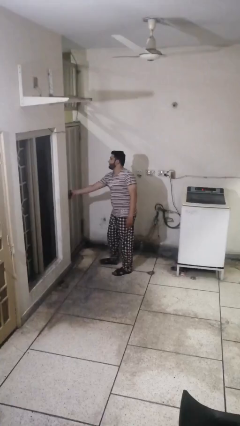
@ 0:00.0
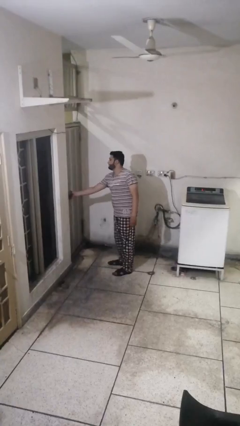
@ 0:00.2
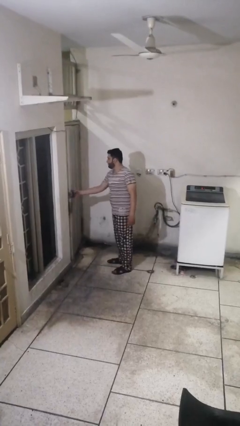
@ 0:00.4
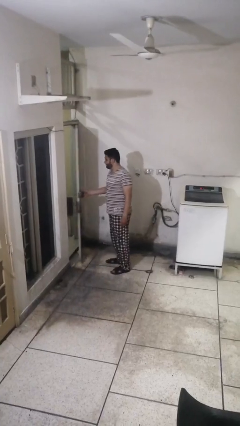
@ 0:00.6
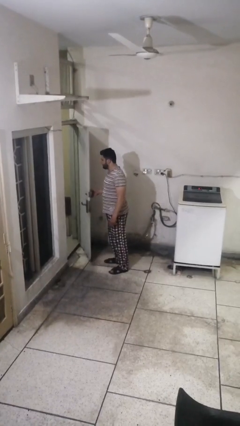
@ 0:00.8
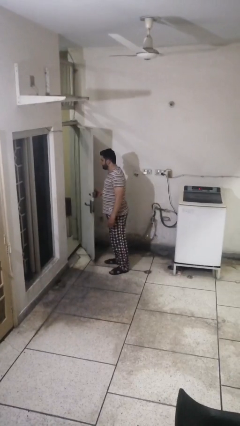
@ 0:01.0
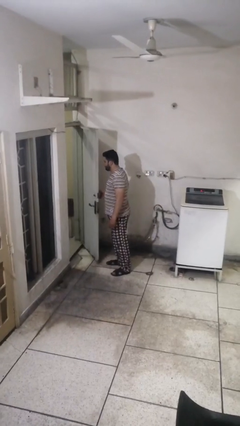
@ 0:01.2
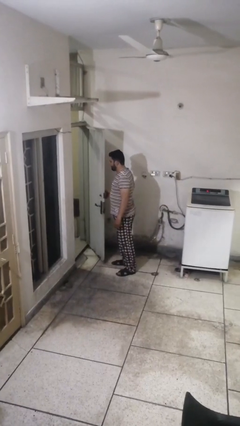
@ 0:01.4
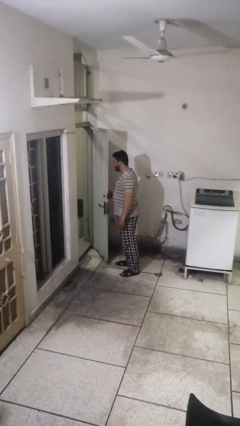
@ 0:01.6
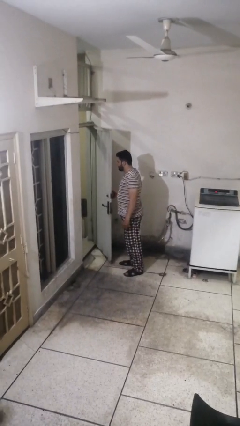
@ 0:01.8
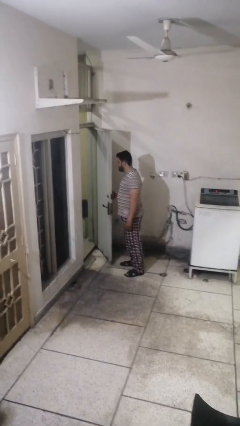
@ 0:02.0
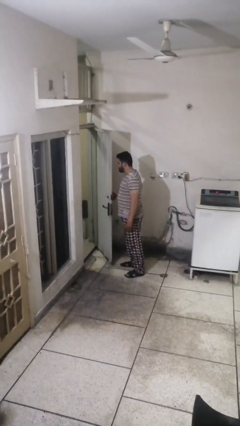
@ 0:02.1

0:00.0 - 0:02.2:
person opens facility door

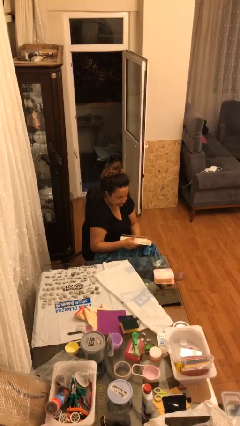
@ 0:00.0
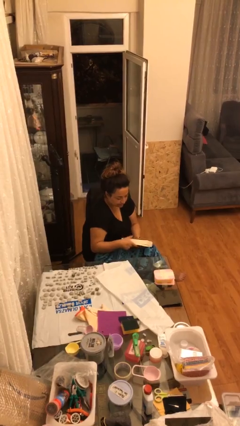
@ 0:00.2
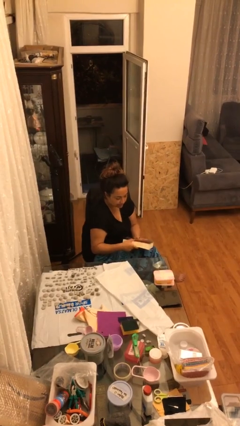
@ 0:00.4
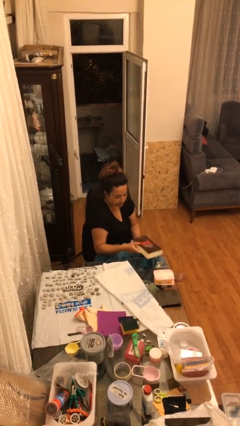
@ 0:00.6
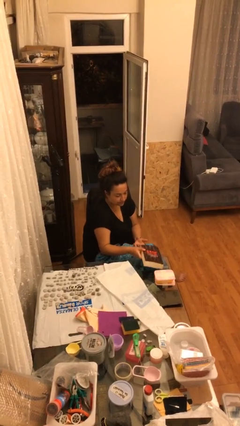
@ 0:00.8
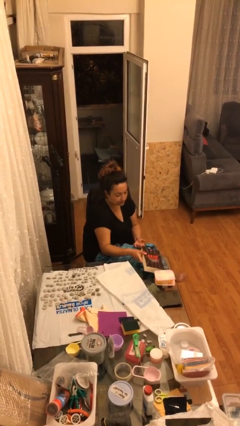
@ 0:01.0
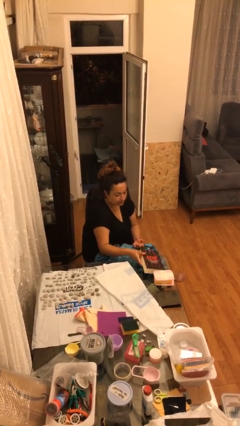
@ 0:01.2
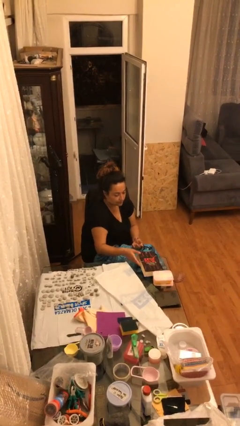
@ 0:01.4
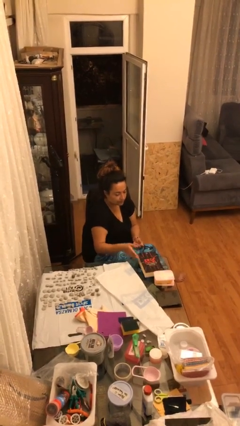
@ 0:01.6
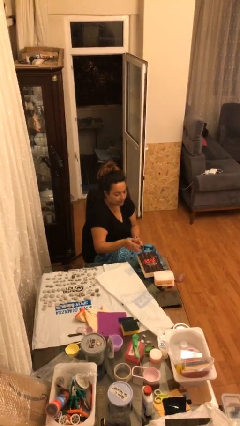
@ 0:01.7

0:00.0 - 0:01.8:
person puts down object on table

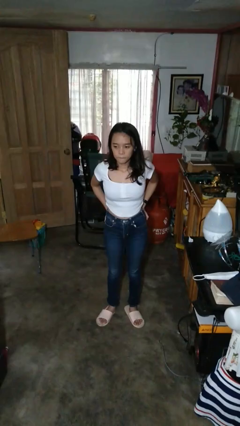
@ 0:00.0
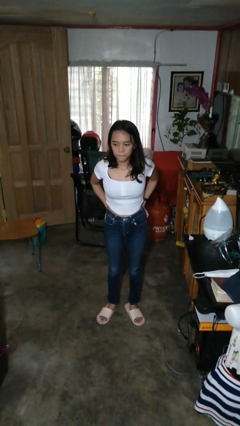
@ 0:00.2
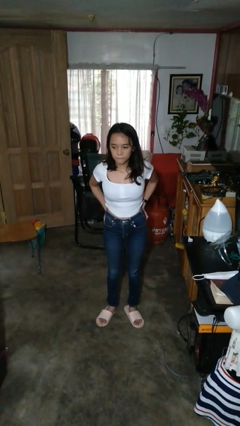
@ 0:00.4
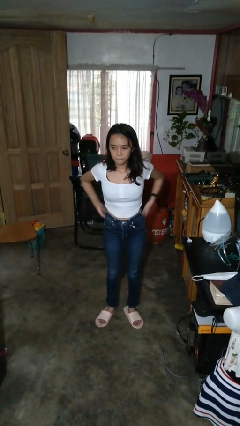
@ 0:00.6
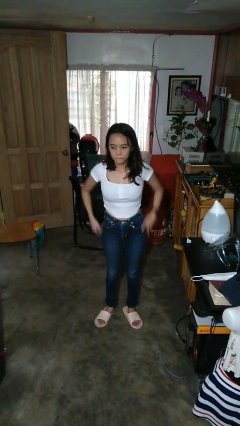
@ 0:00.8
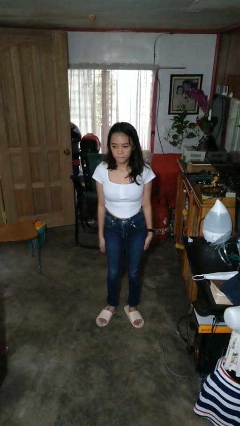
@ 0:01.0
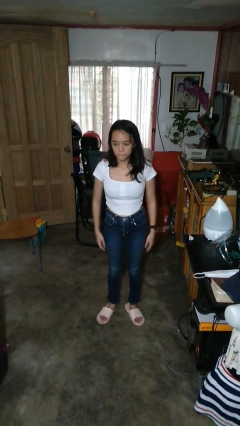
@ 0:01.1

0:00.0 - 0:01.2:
person puts hands in back pockets

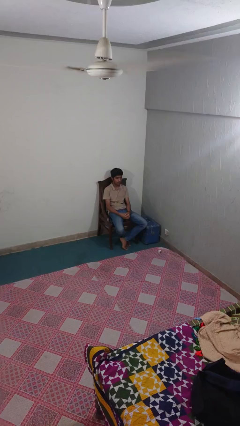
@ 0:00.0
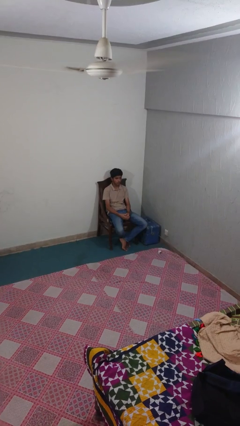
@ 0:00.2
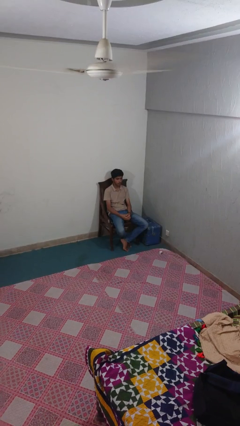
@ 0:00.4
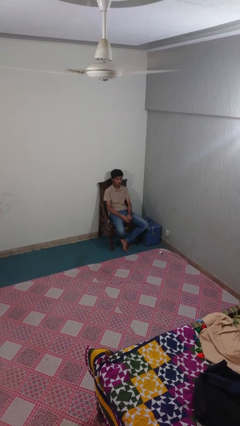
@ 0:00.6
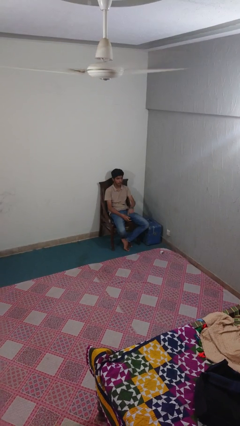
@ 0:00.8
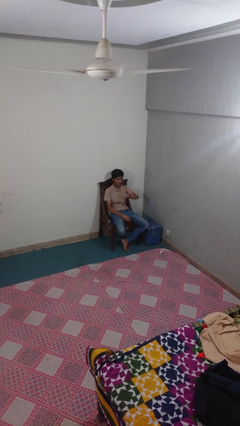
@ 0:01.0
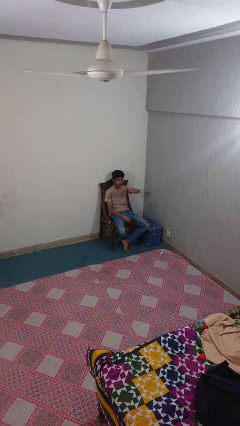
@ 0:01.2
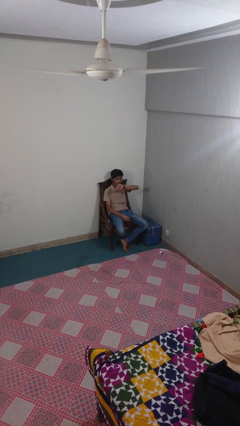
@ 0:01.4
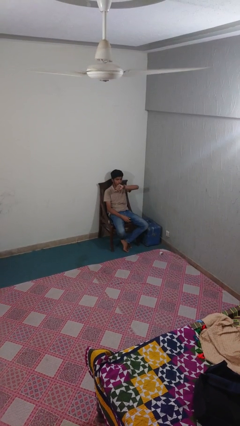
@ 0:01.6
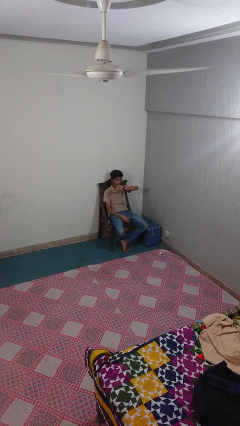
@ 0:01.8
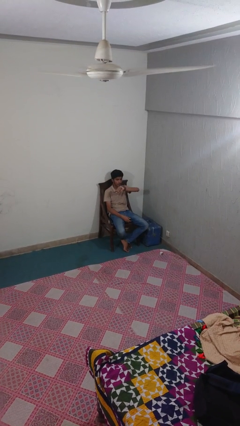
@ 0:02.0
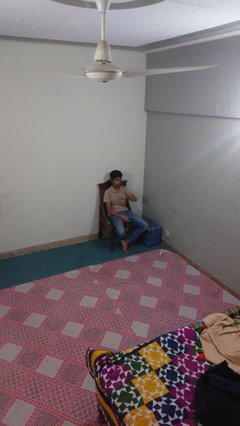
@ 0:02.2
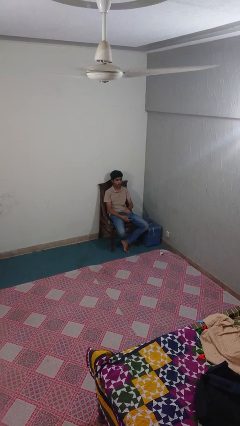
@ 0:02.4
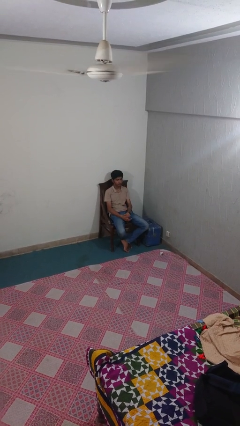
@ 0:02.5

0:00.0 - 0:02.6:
person looks at wristwatch

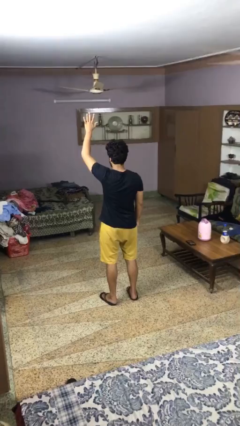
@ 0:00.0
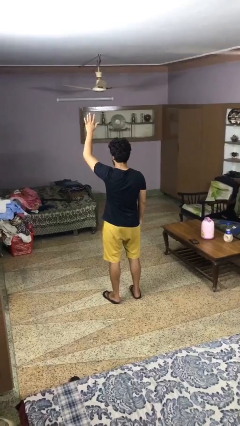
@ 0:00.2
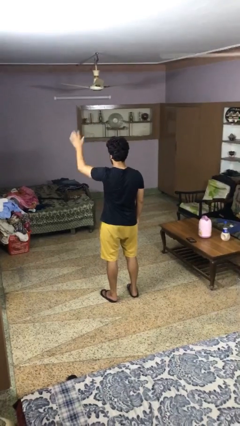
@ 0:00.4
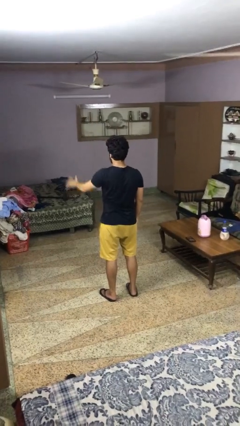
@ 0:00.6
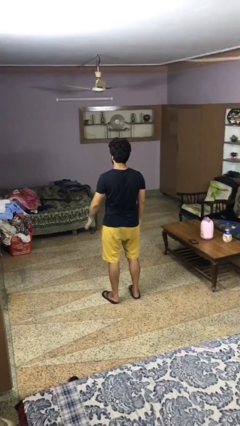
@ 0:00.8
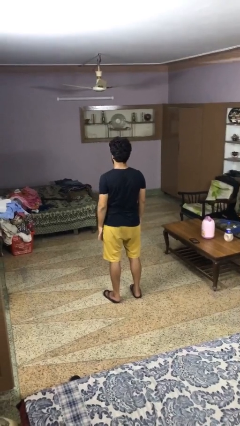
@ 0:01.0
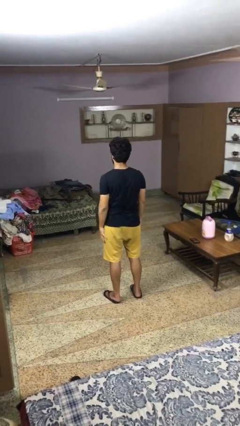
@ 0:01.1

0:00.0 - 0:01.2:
person gestures lower hand

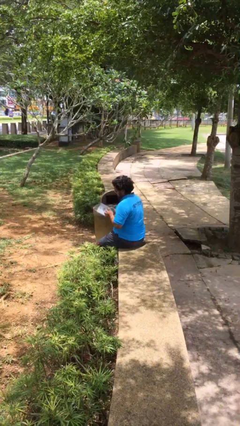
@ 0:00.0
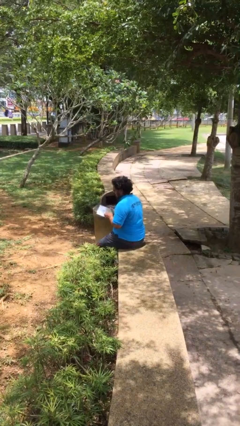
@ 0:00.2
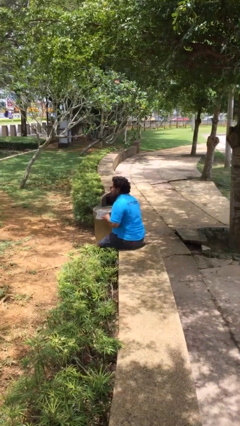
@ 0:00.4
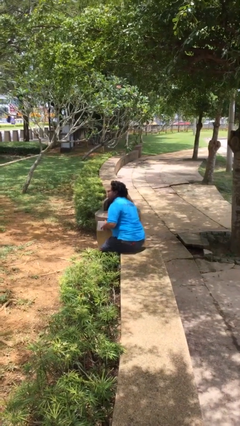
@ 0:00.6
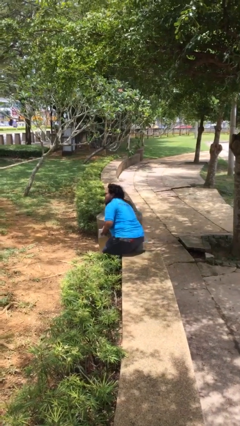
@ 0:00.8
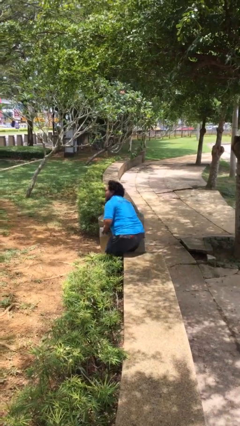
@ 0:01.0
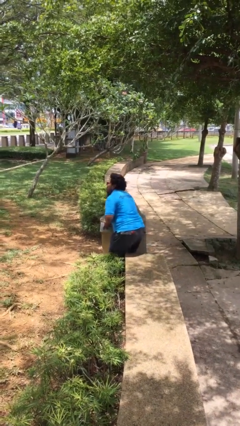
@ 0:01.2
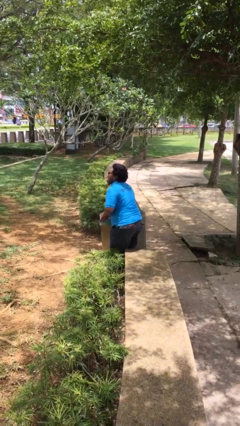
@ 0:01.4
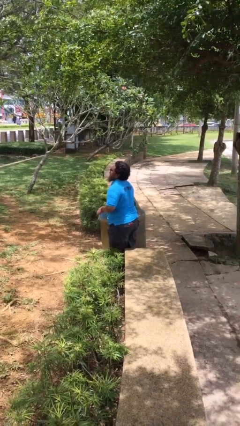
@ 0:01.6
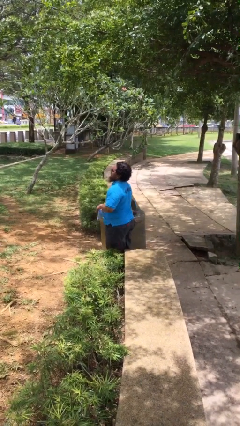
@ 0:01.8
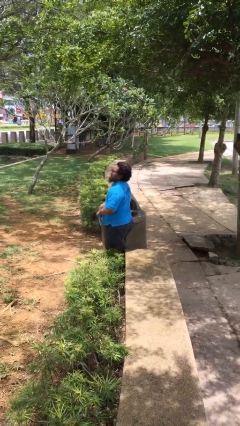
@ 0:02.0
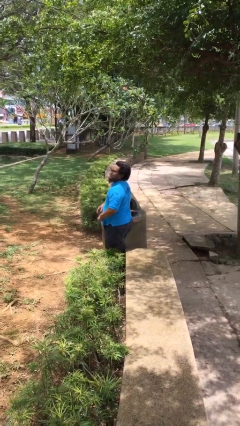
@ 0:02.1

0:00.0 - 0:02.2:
person stands up

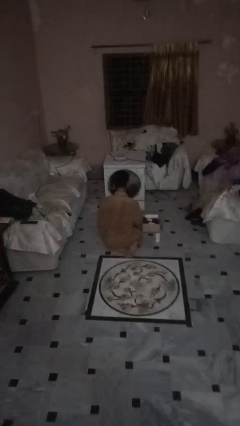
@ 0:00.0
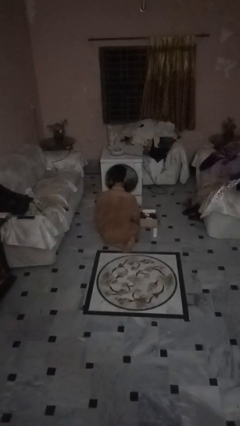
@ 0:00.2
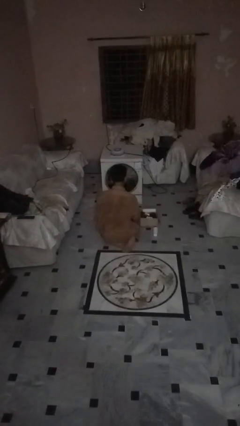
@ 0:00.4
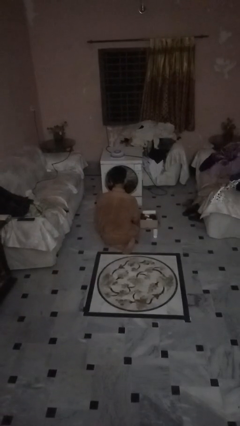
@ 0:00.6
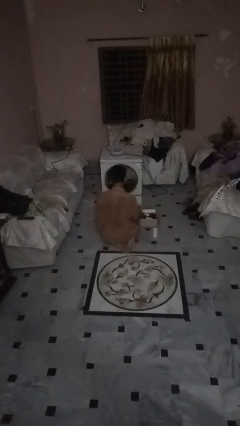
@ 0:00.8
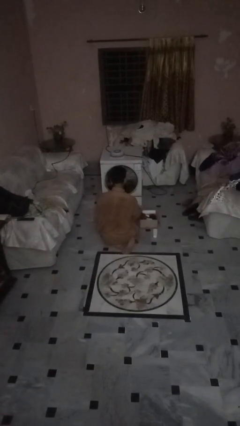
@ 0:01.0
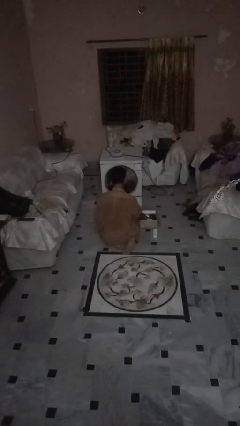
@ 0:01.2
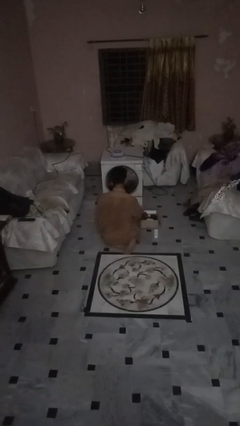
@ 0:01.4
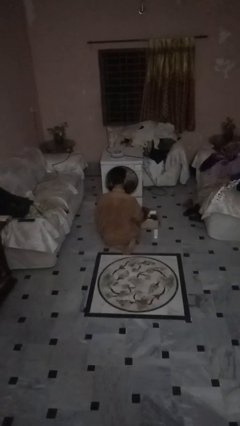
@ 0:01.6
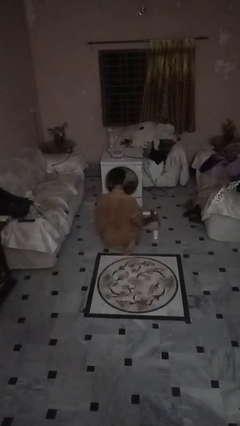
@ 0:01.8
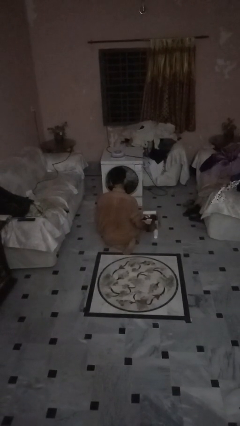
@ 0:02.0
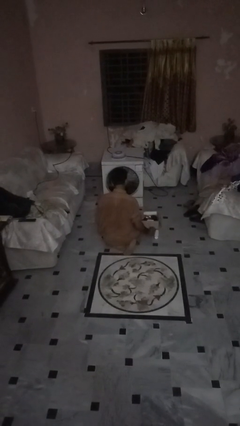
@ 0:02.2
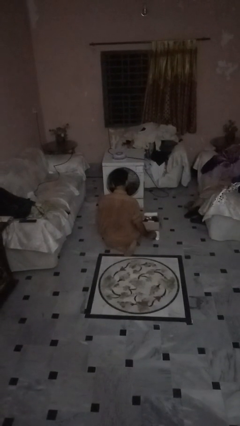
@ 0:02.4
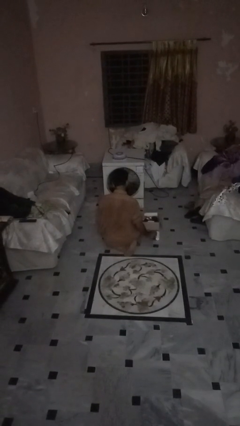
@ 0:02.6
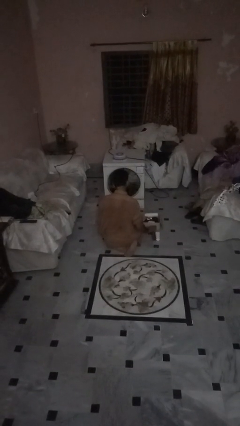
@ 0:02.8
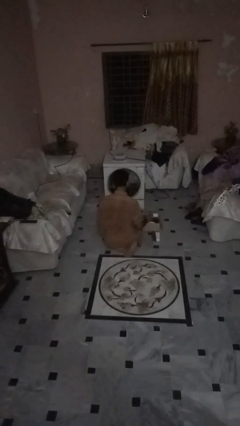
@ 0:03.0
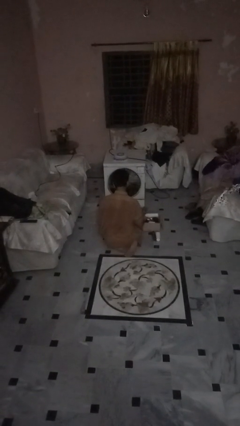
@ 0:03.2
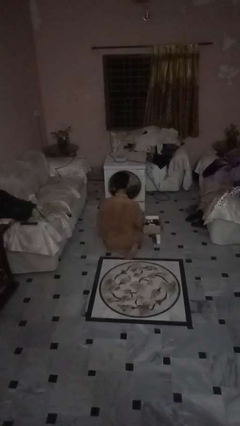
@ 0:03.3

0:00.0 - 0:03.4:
person unloads box onto floor

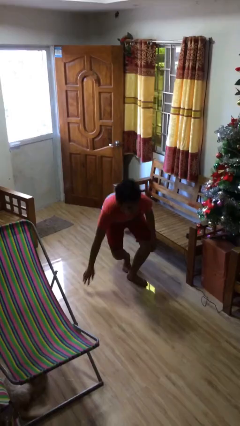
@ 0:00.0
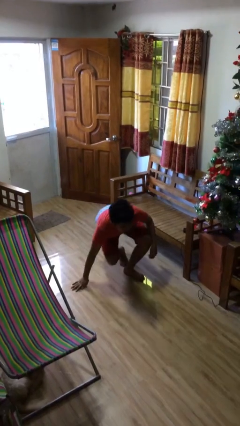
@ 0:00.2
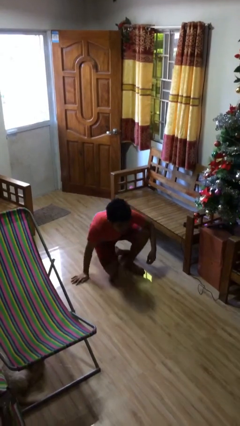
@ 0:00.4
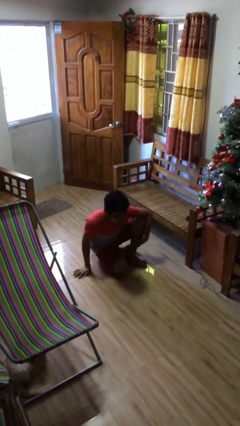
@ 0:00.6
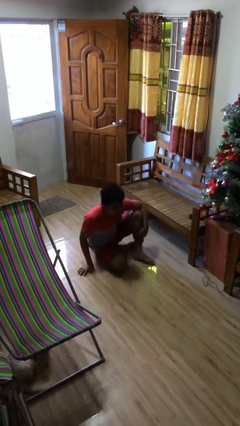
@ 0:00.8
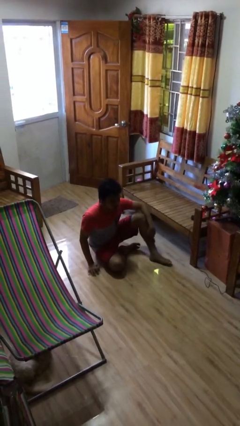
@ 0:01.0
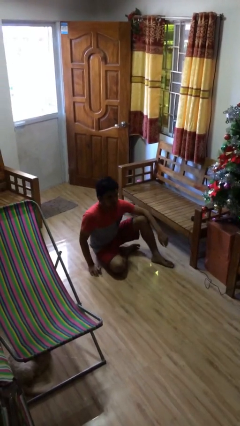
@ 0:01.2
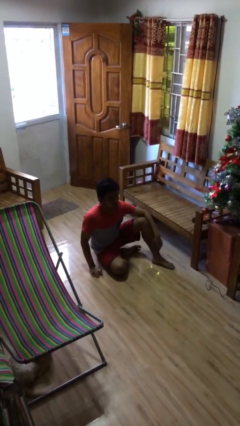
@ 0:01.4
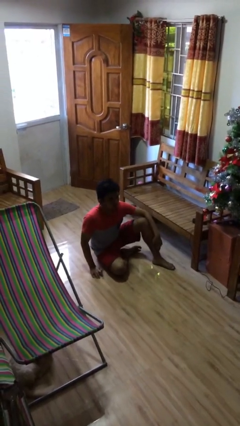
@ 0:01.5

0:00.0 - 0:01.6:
person sits down

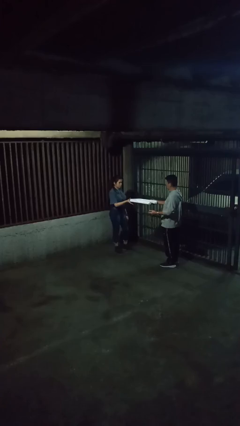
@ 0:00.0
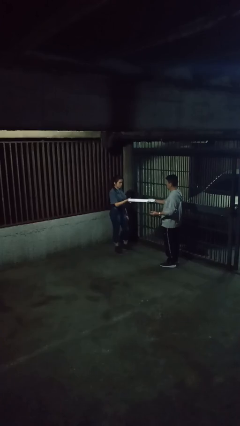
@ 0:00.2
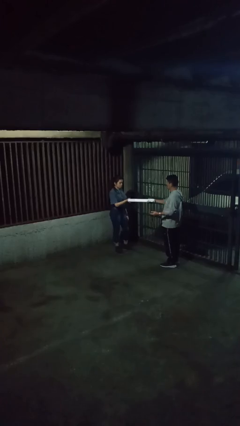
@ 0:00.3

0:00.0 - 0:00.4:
person transfers object to person
